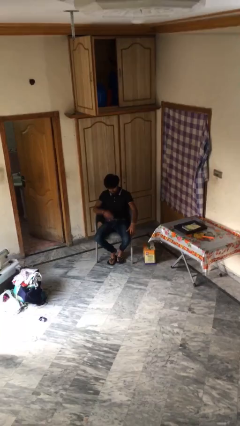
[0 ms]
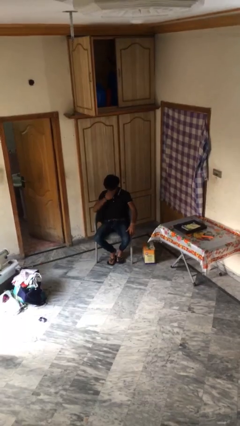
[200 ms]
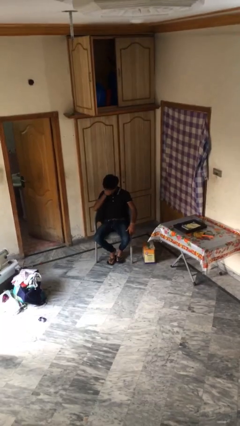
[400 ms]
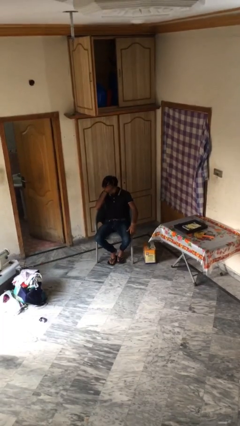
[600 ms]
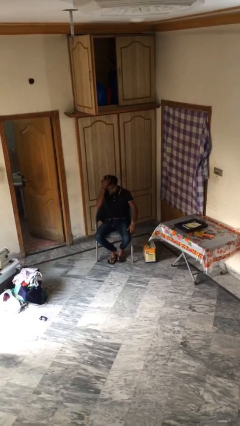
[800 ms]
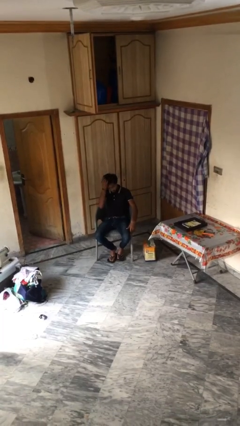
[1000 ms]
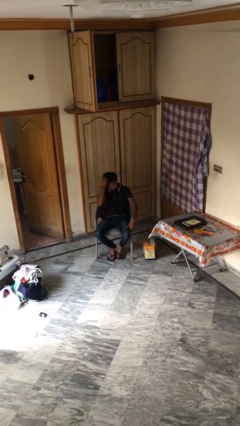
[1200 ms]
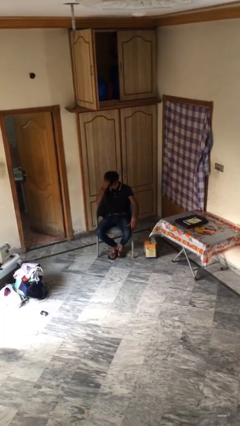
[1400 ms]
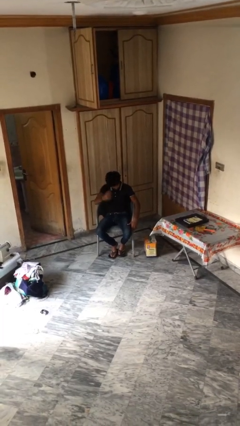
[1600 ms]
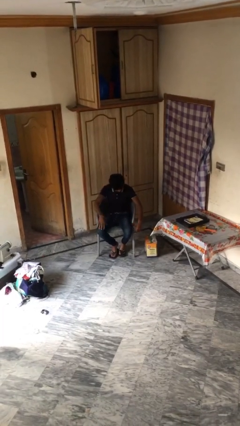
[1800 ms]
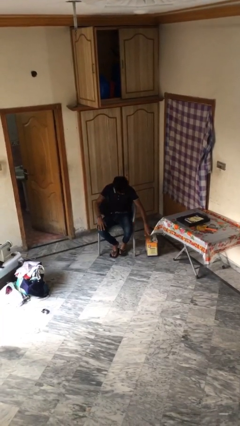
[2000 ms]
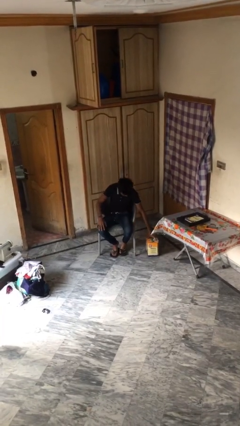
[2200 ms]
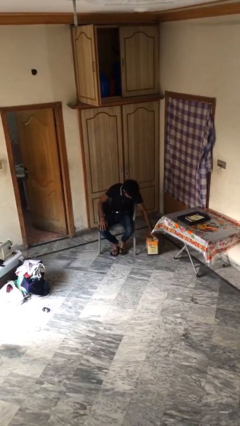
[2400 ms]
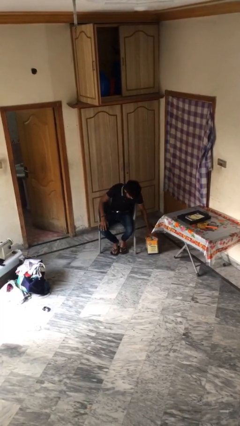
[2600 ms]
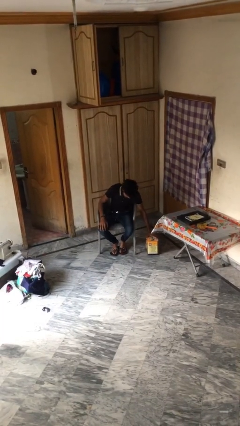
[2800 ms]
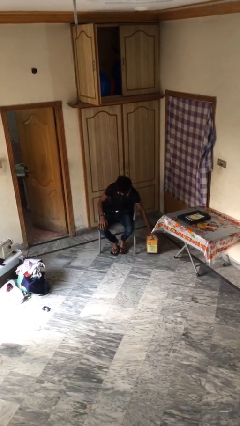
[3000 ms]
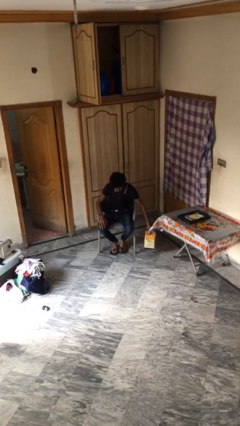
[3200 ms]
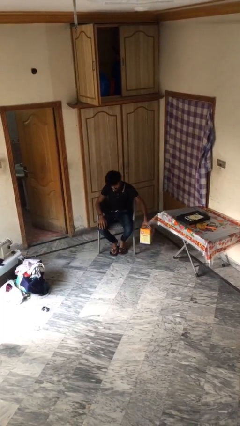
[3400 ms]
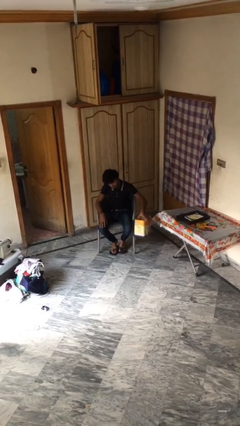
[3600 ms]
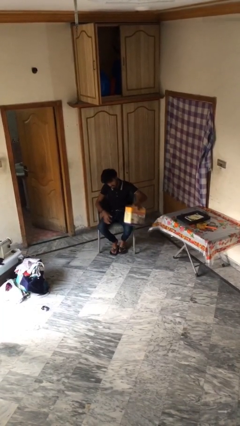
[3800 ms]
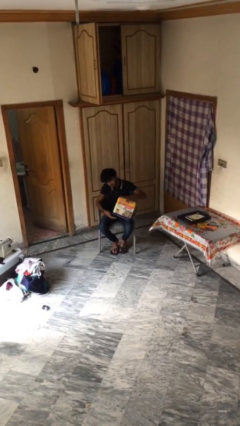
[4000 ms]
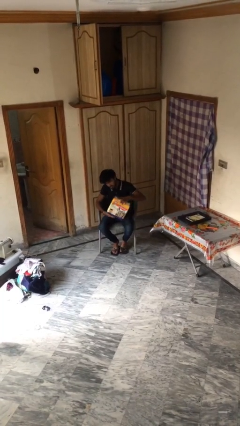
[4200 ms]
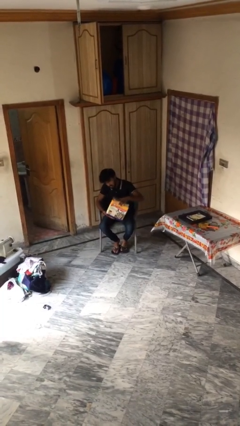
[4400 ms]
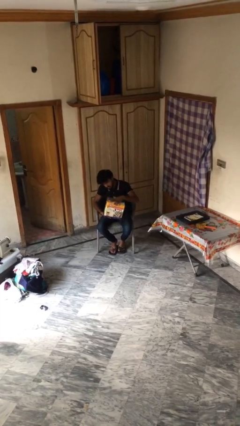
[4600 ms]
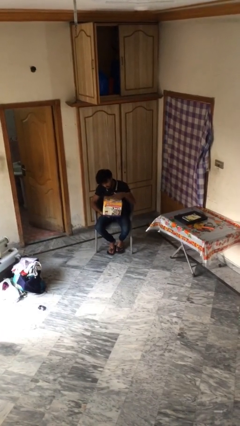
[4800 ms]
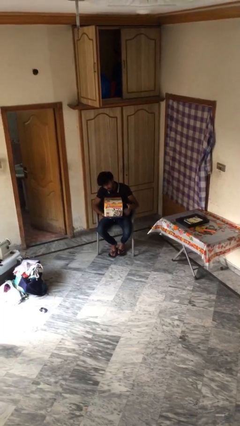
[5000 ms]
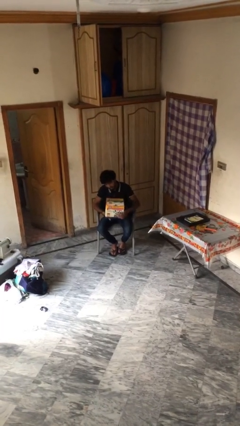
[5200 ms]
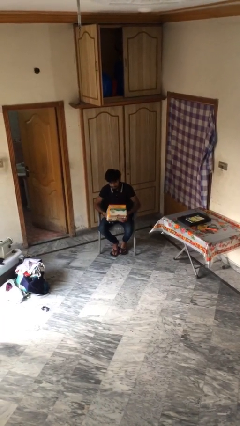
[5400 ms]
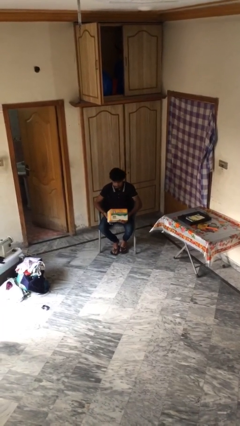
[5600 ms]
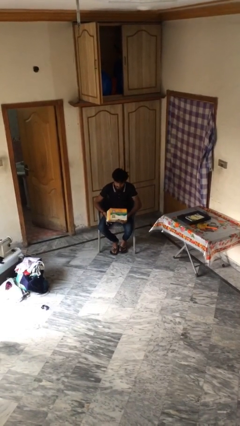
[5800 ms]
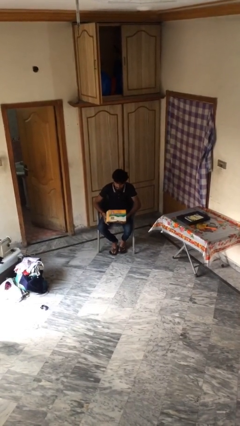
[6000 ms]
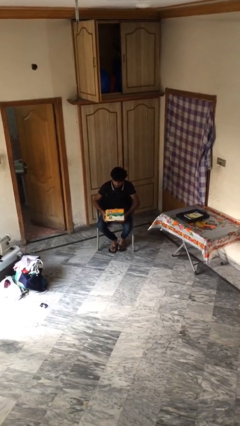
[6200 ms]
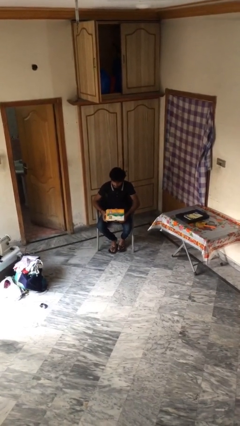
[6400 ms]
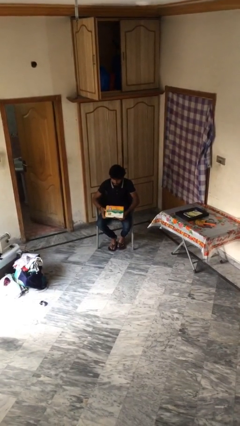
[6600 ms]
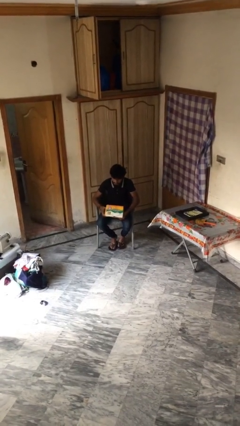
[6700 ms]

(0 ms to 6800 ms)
person picks up object from floor

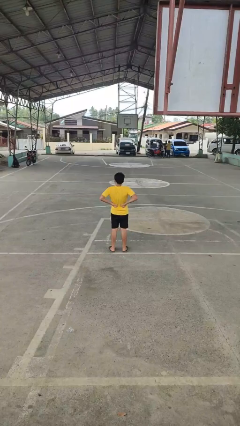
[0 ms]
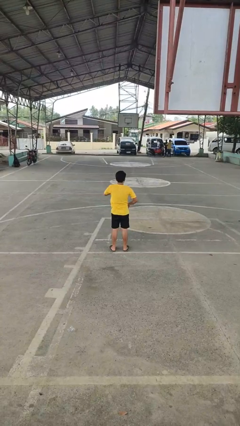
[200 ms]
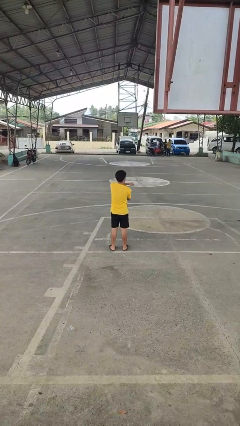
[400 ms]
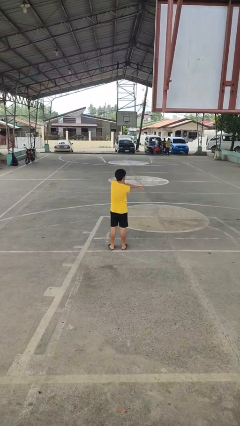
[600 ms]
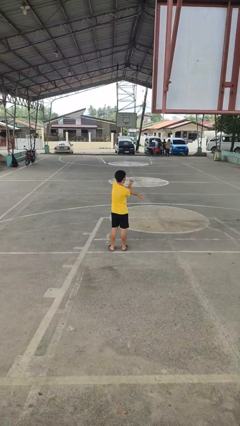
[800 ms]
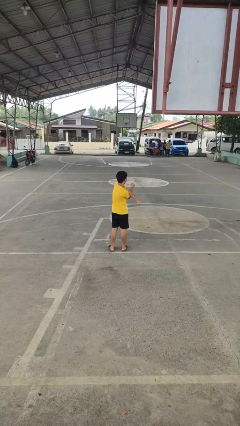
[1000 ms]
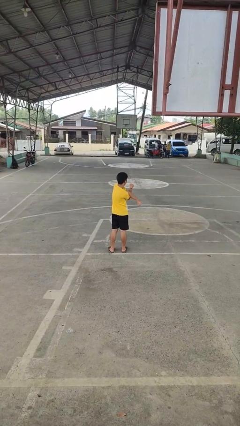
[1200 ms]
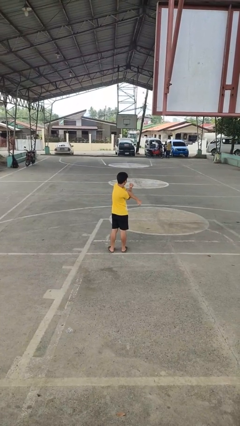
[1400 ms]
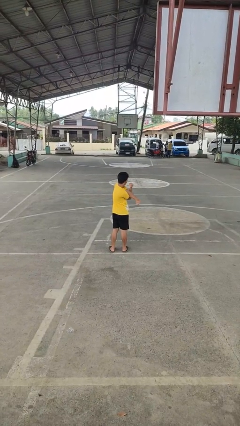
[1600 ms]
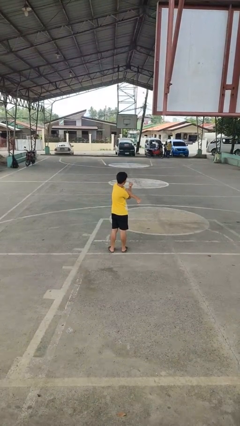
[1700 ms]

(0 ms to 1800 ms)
person stretches arms to side

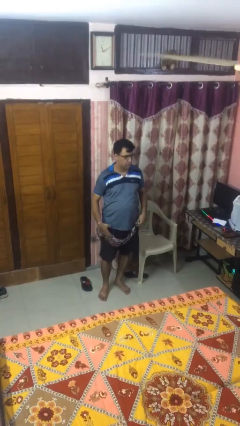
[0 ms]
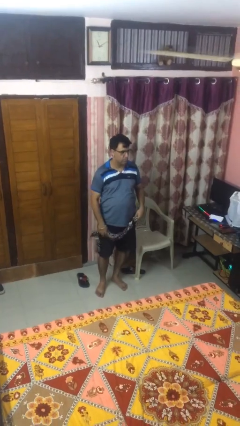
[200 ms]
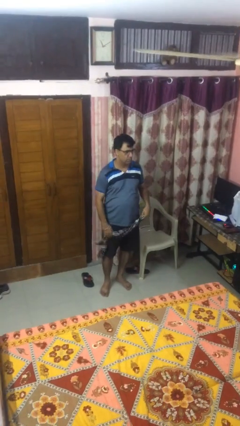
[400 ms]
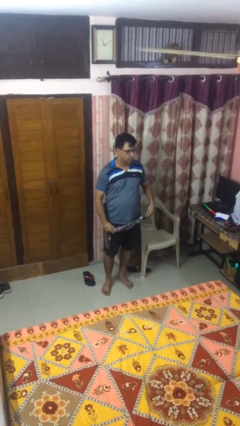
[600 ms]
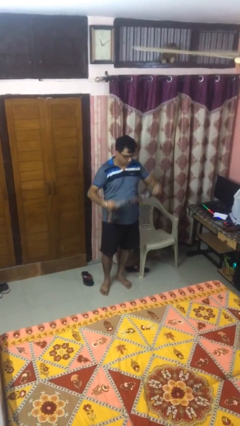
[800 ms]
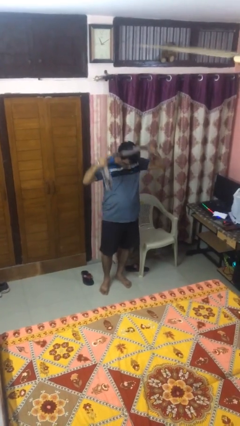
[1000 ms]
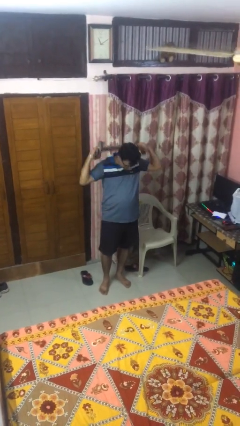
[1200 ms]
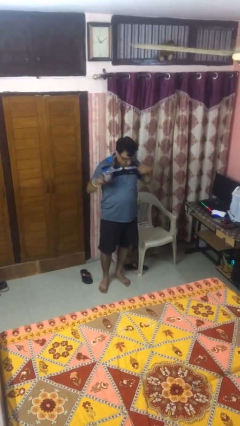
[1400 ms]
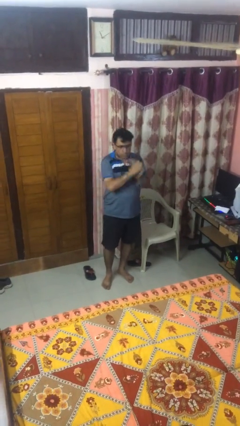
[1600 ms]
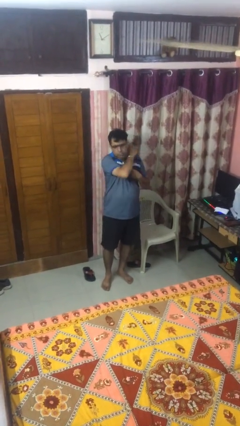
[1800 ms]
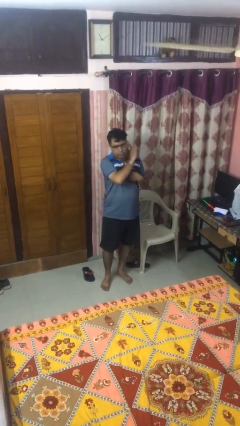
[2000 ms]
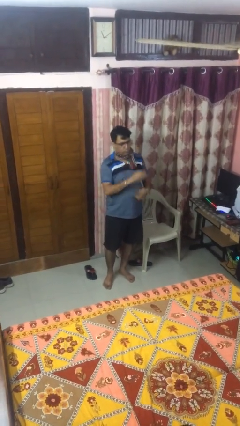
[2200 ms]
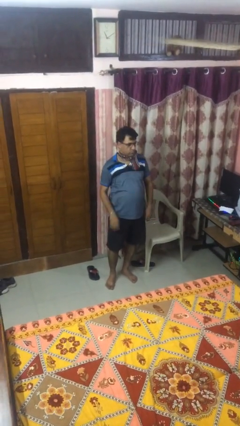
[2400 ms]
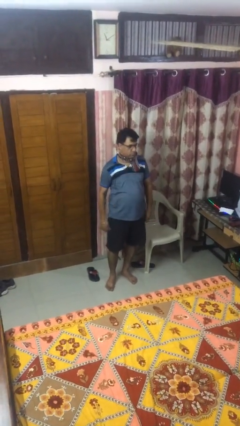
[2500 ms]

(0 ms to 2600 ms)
person puts on scarf

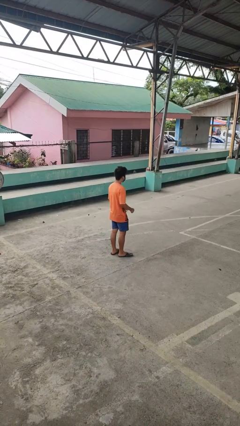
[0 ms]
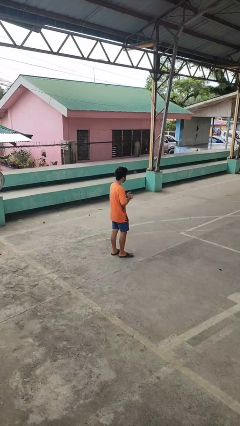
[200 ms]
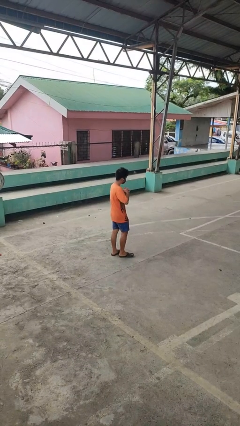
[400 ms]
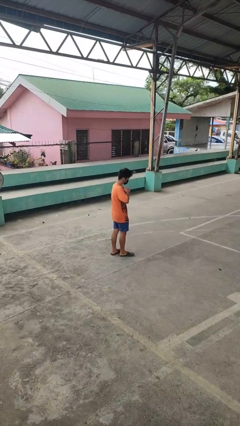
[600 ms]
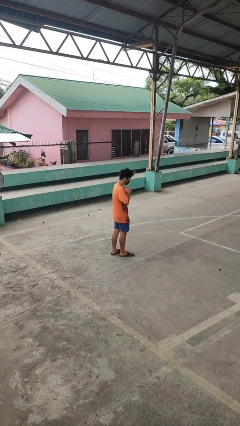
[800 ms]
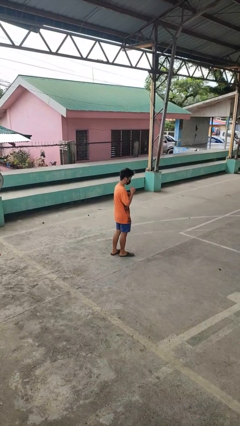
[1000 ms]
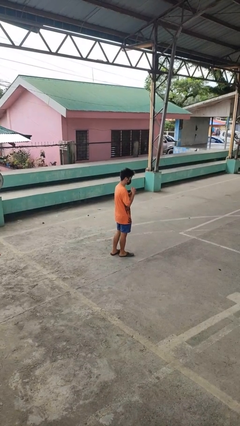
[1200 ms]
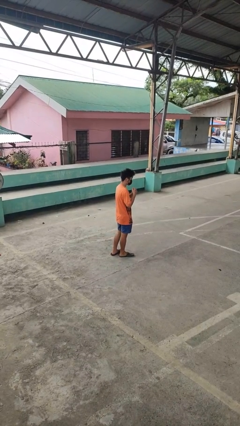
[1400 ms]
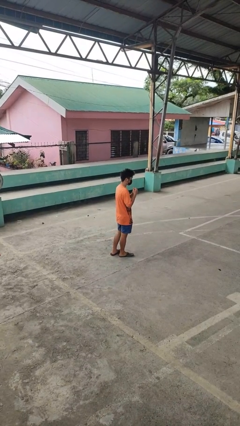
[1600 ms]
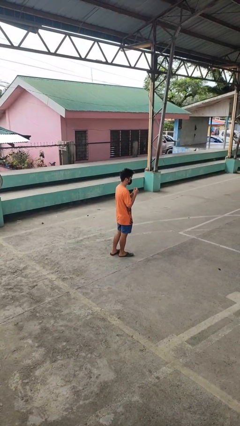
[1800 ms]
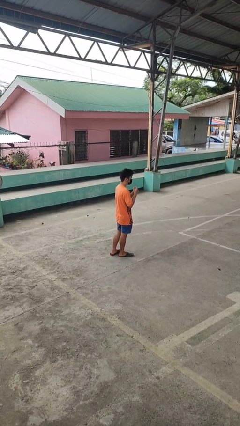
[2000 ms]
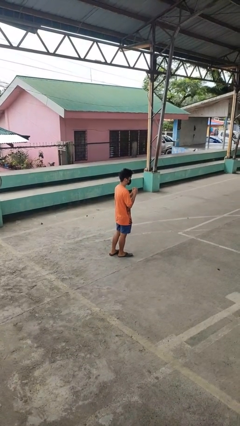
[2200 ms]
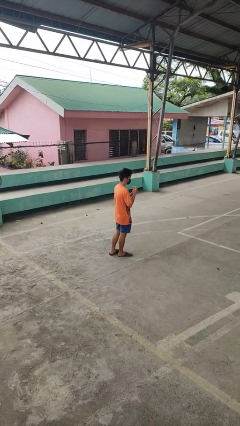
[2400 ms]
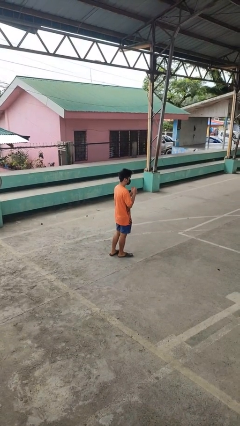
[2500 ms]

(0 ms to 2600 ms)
person cracks knuckles

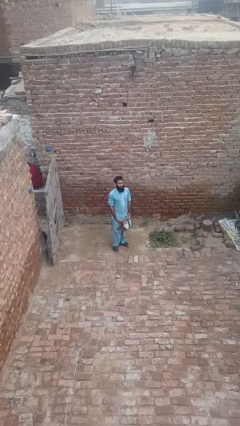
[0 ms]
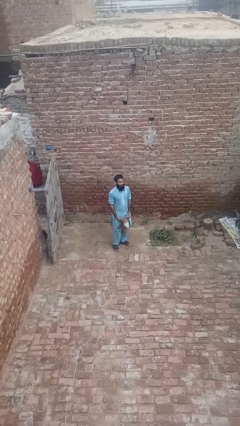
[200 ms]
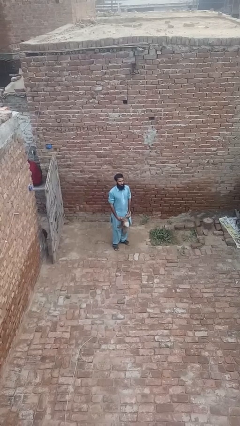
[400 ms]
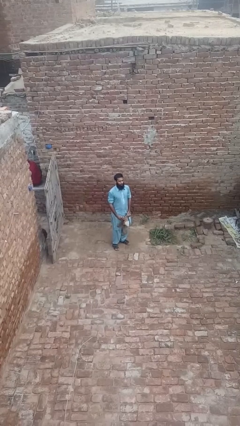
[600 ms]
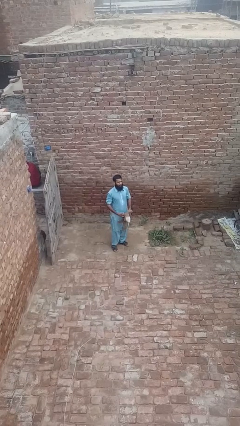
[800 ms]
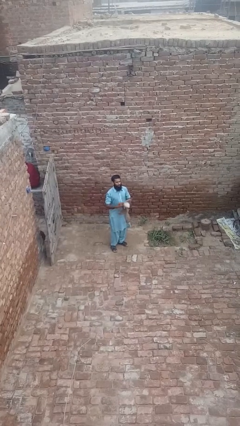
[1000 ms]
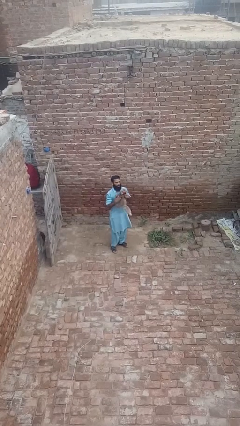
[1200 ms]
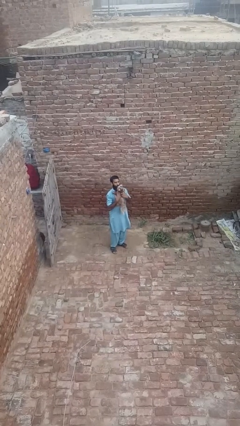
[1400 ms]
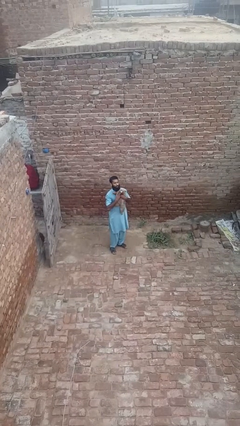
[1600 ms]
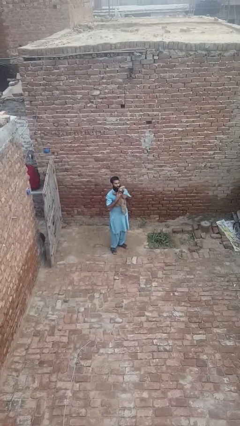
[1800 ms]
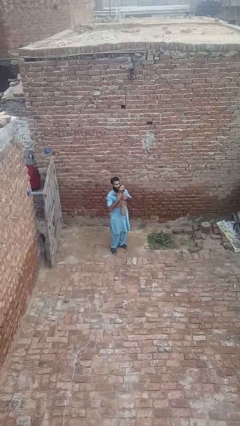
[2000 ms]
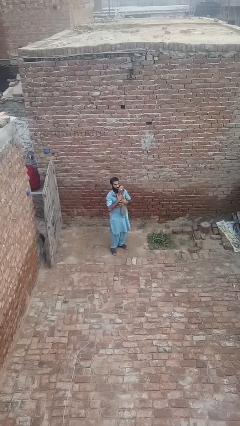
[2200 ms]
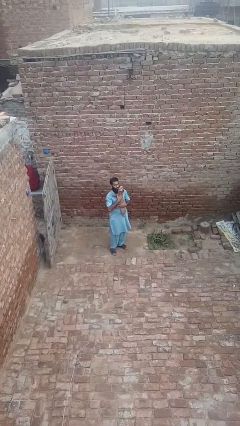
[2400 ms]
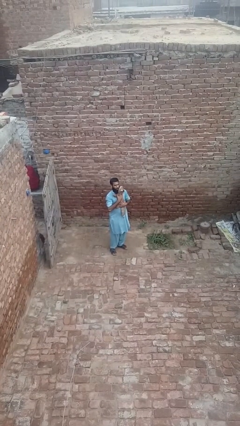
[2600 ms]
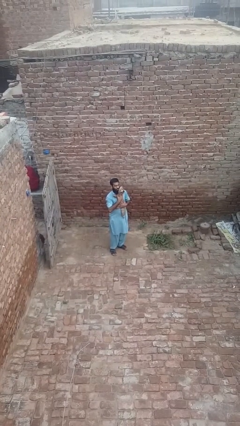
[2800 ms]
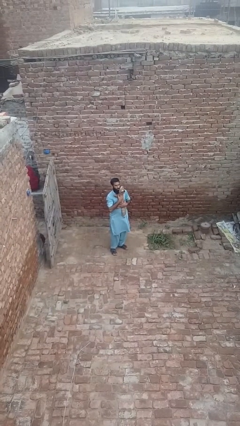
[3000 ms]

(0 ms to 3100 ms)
person hugs stuffed animal

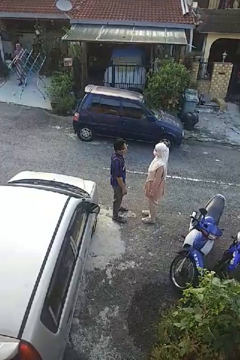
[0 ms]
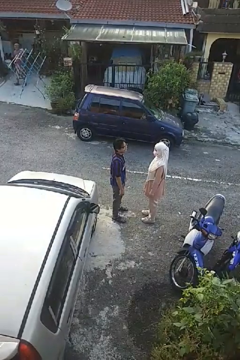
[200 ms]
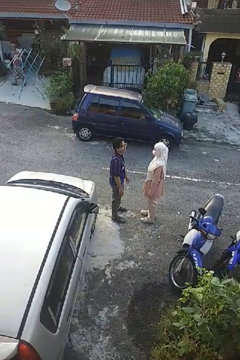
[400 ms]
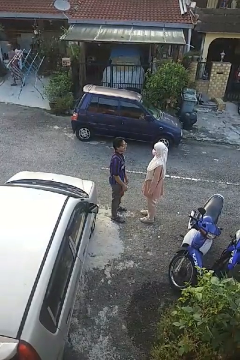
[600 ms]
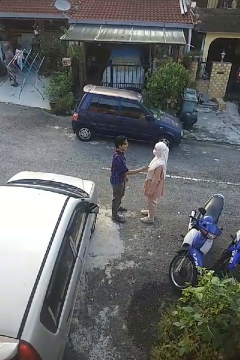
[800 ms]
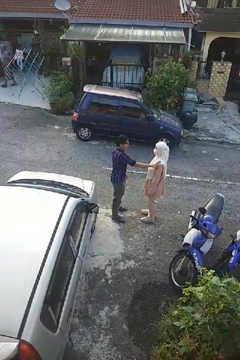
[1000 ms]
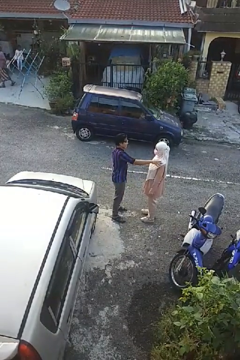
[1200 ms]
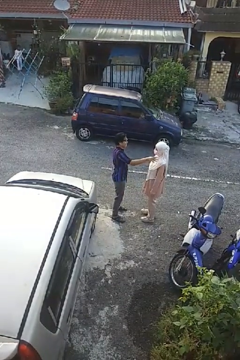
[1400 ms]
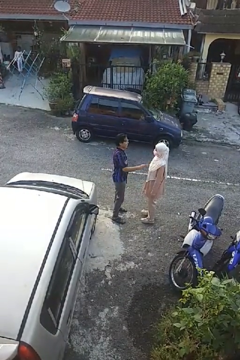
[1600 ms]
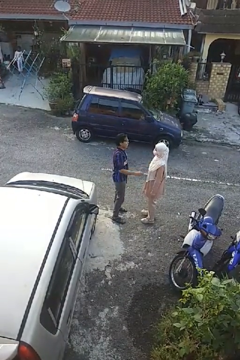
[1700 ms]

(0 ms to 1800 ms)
person shoves person
